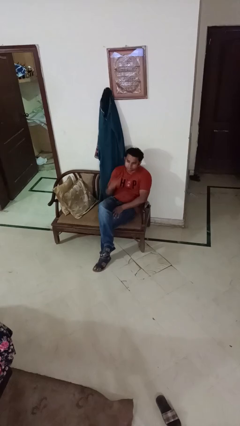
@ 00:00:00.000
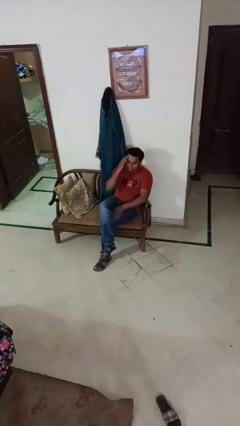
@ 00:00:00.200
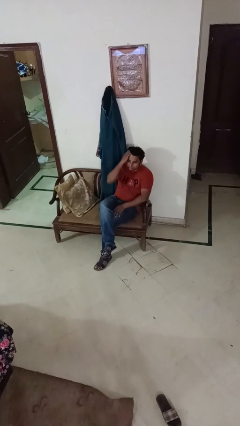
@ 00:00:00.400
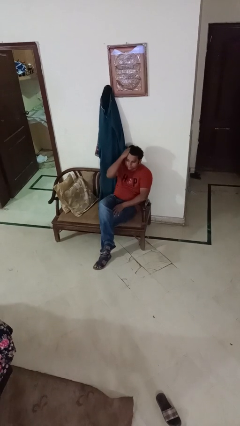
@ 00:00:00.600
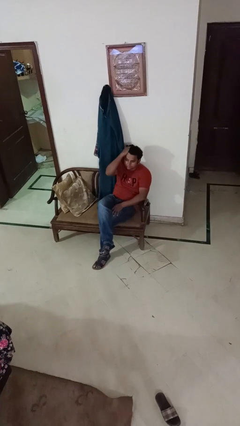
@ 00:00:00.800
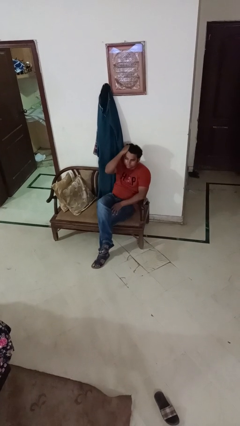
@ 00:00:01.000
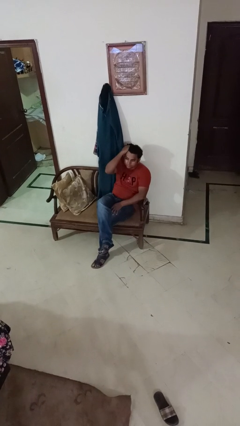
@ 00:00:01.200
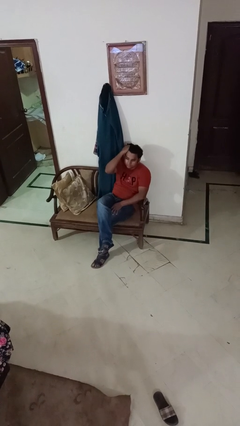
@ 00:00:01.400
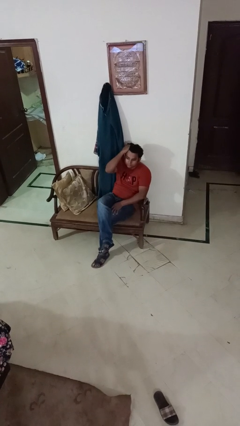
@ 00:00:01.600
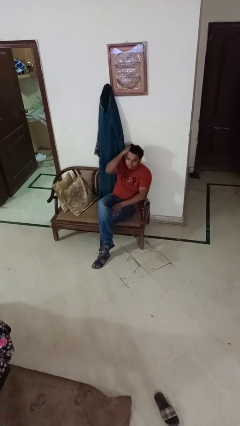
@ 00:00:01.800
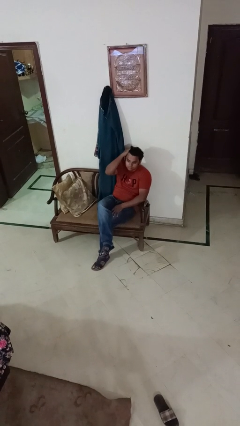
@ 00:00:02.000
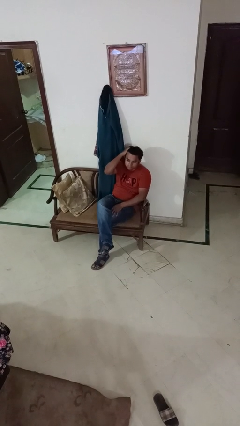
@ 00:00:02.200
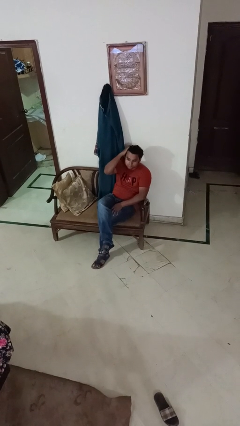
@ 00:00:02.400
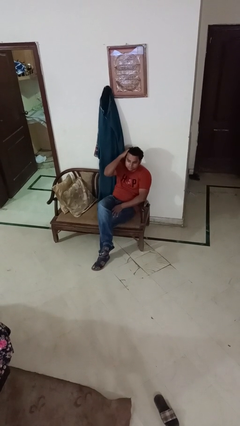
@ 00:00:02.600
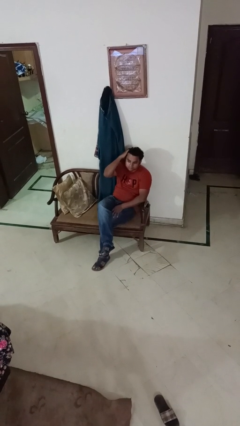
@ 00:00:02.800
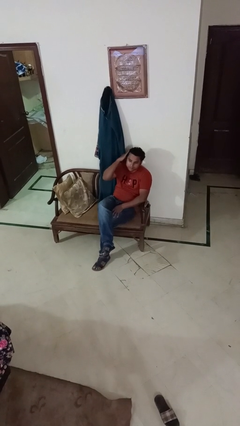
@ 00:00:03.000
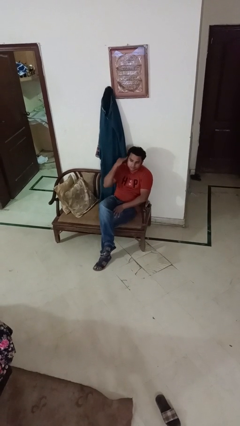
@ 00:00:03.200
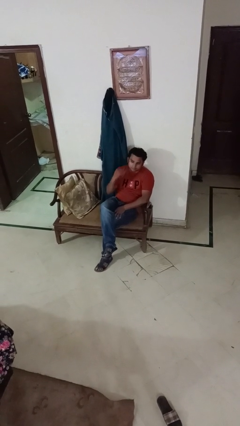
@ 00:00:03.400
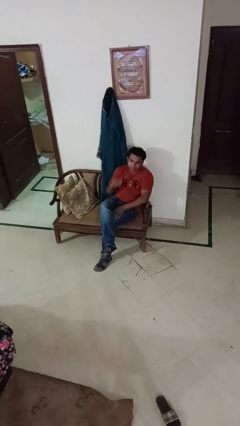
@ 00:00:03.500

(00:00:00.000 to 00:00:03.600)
person strokes hair

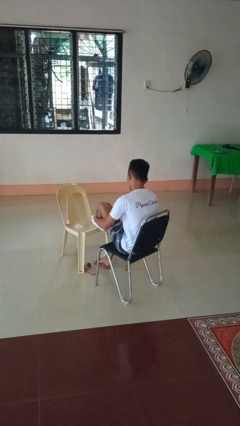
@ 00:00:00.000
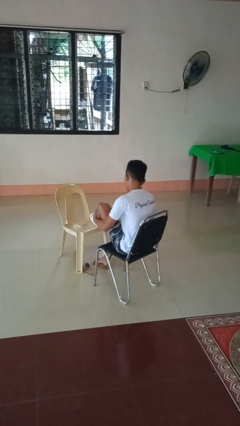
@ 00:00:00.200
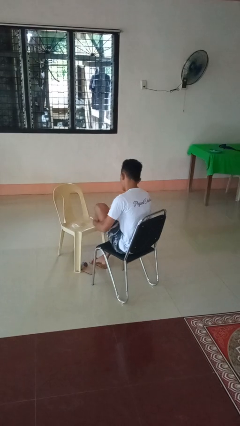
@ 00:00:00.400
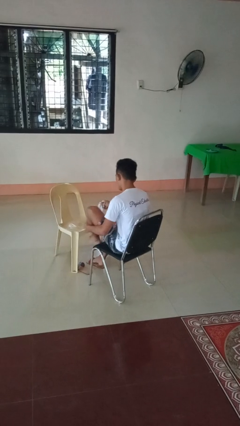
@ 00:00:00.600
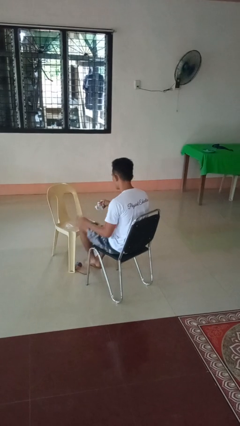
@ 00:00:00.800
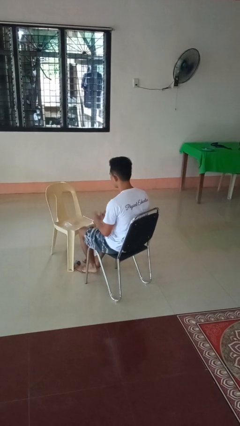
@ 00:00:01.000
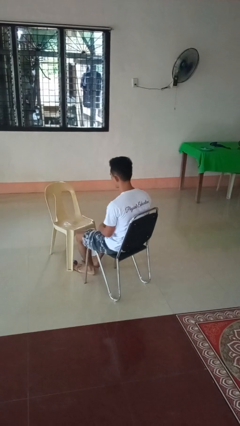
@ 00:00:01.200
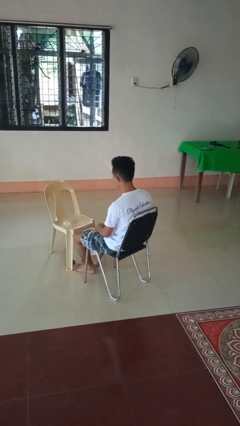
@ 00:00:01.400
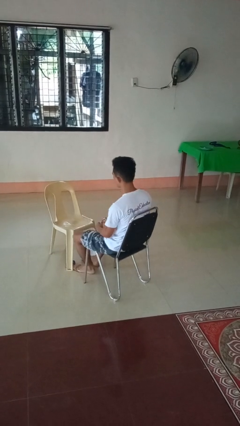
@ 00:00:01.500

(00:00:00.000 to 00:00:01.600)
person takes off socks

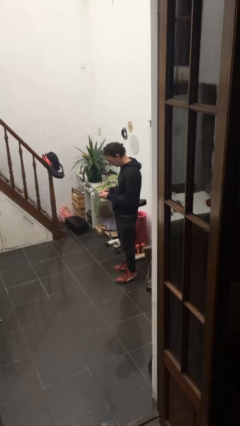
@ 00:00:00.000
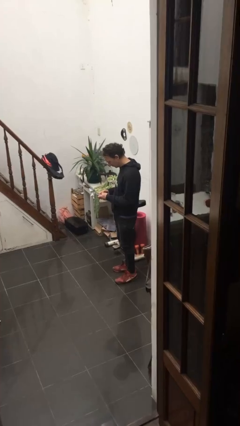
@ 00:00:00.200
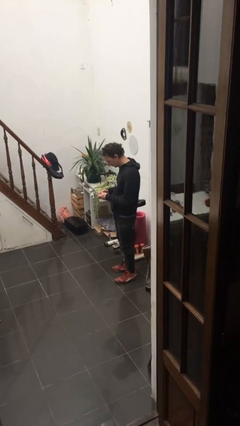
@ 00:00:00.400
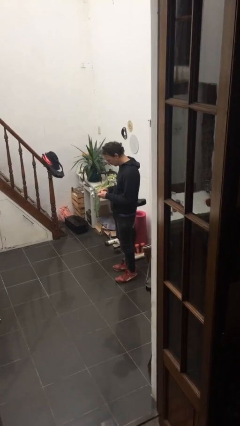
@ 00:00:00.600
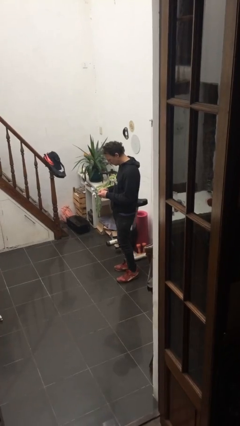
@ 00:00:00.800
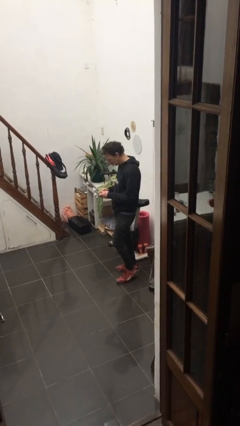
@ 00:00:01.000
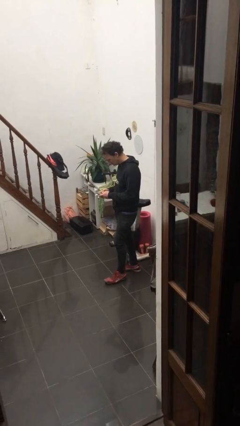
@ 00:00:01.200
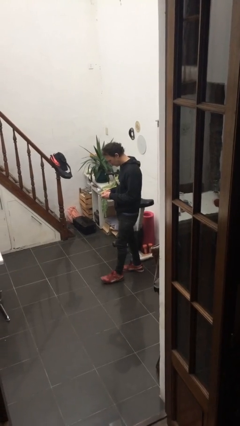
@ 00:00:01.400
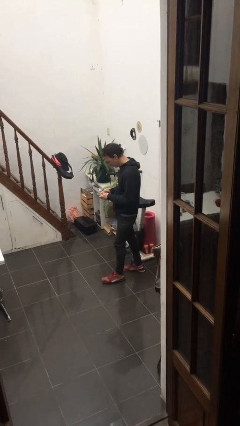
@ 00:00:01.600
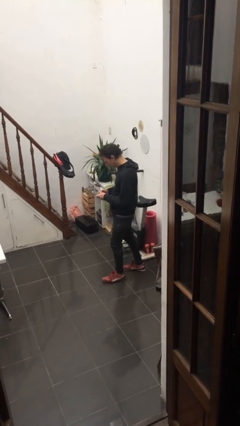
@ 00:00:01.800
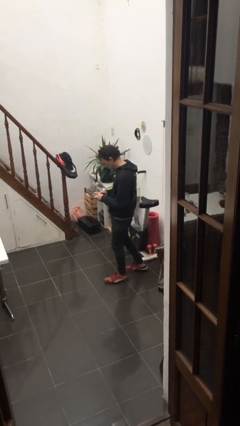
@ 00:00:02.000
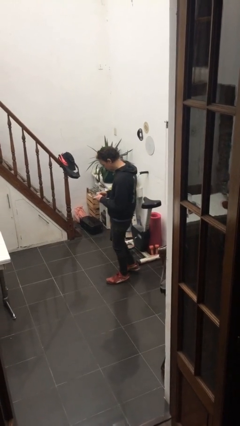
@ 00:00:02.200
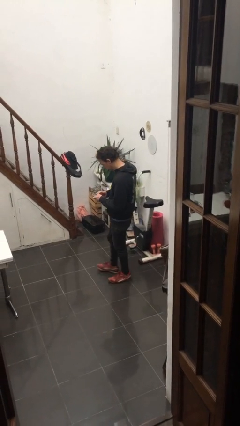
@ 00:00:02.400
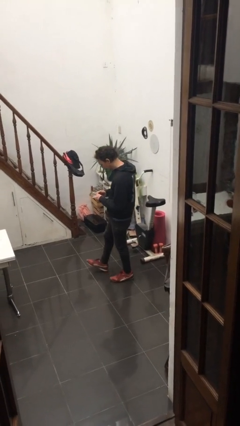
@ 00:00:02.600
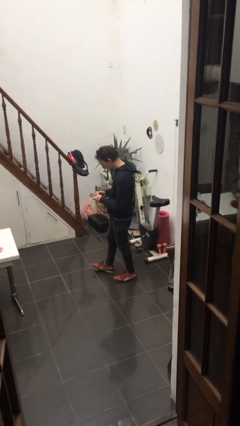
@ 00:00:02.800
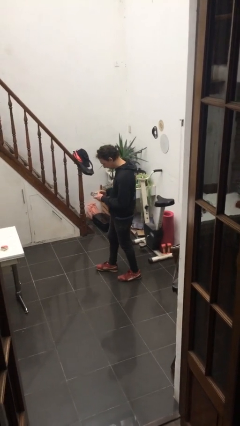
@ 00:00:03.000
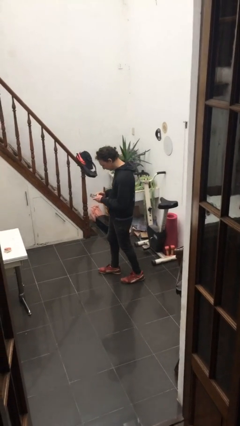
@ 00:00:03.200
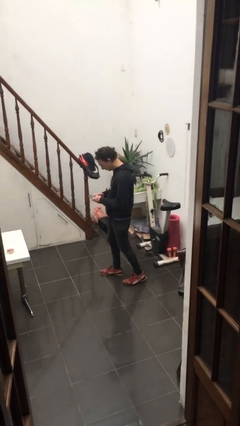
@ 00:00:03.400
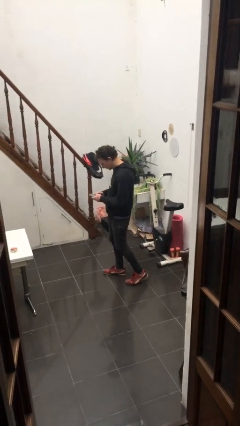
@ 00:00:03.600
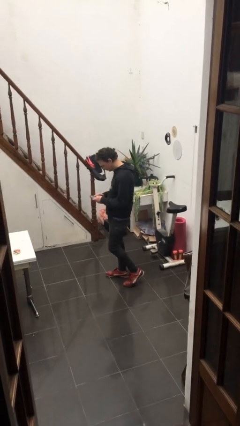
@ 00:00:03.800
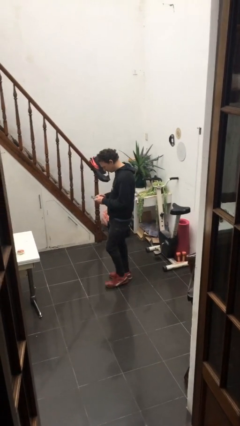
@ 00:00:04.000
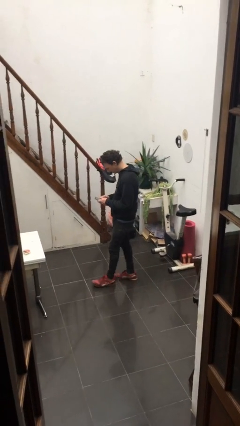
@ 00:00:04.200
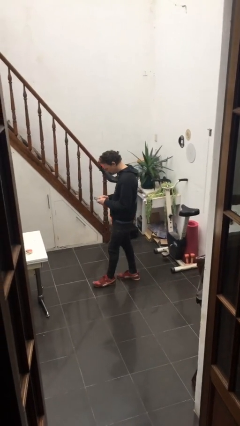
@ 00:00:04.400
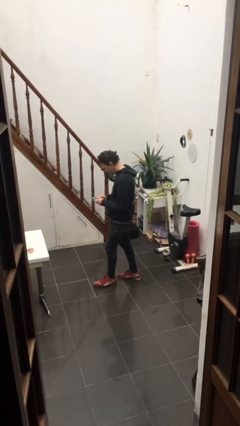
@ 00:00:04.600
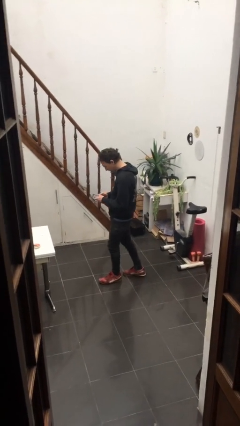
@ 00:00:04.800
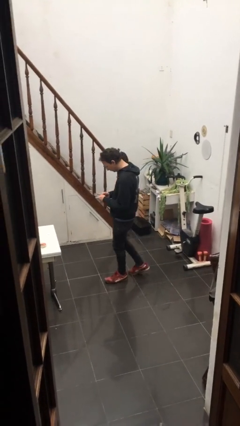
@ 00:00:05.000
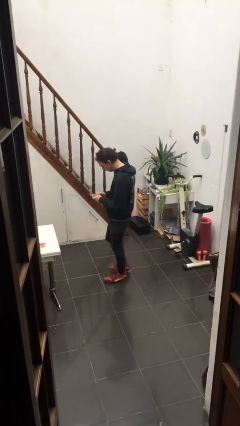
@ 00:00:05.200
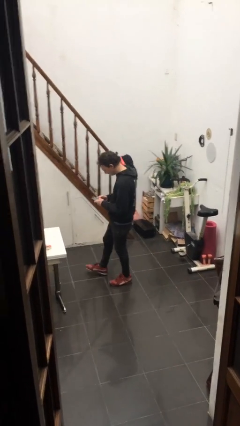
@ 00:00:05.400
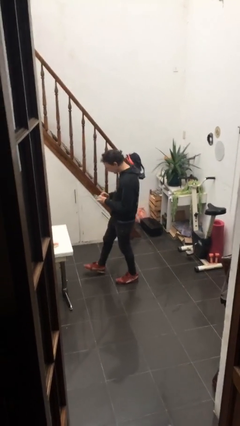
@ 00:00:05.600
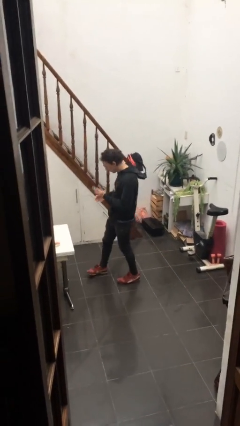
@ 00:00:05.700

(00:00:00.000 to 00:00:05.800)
person texts on phone

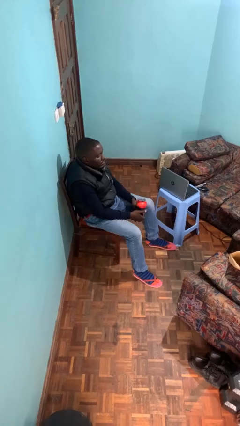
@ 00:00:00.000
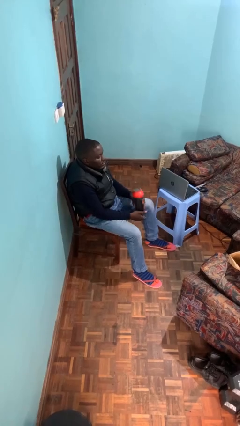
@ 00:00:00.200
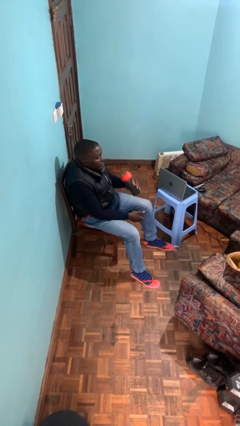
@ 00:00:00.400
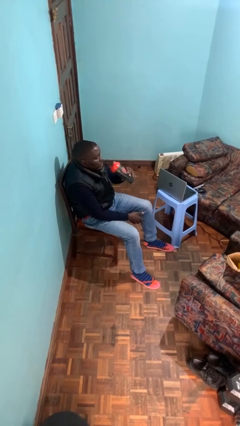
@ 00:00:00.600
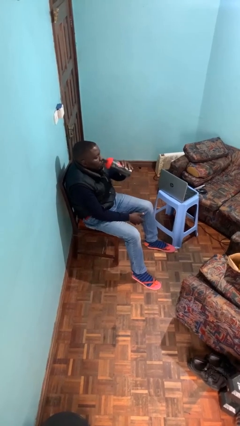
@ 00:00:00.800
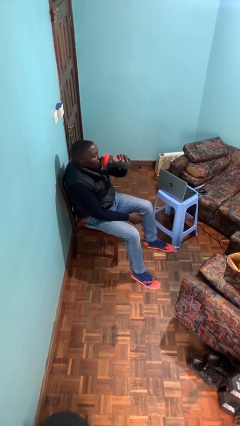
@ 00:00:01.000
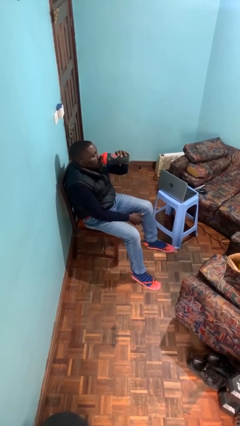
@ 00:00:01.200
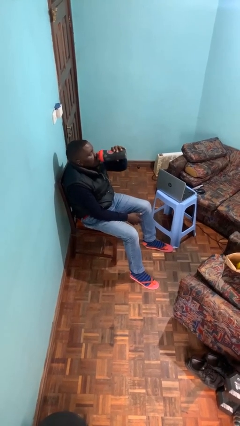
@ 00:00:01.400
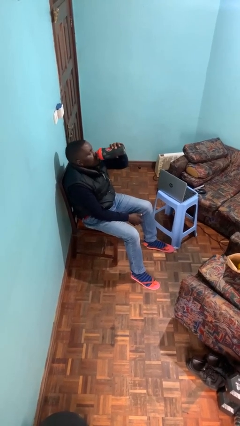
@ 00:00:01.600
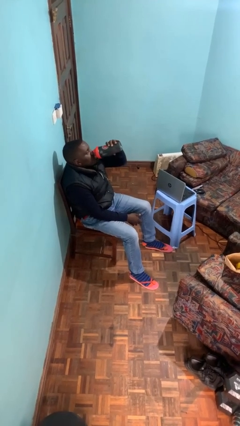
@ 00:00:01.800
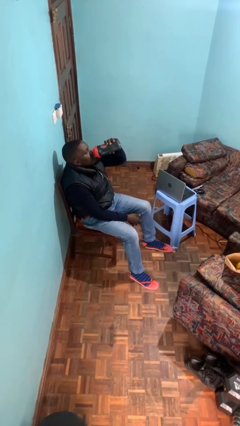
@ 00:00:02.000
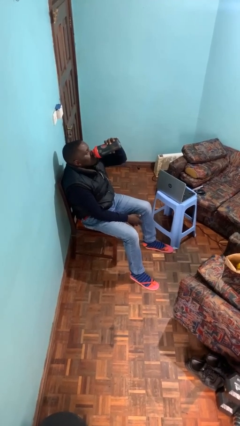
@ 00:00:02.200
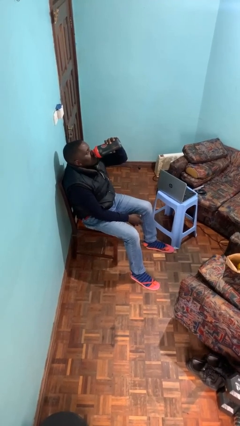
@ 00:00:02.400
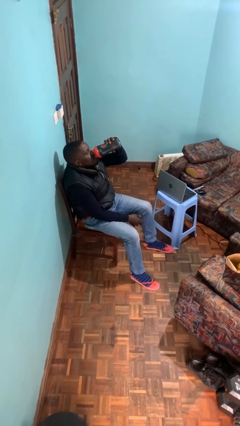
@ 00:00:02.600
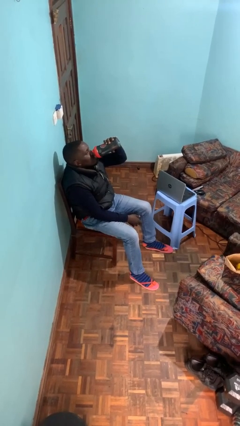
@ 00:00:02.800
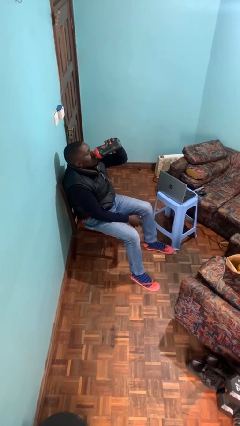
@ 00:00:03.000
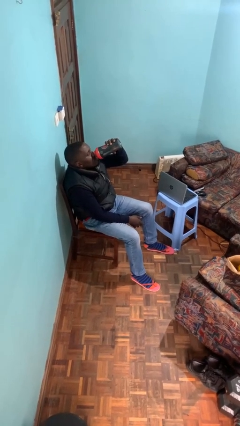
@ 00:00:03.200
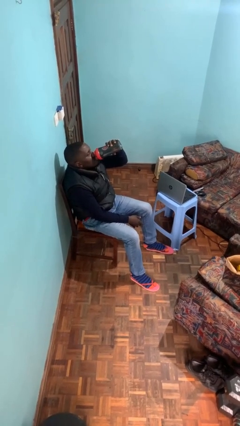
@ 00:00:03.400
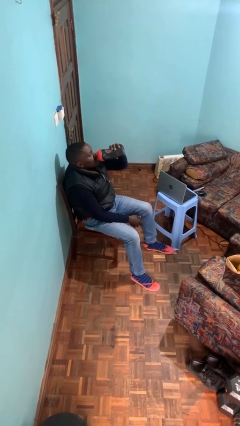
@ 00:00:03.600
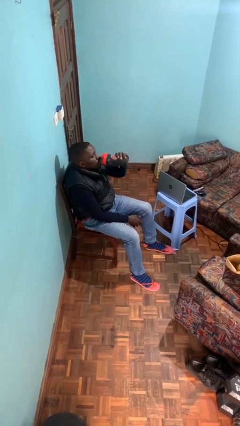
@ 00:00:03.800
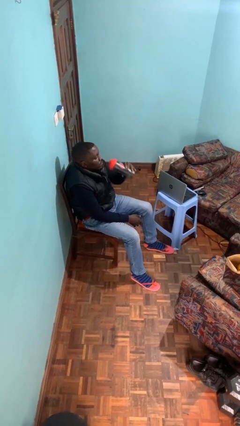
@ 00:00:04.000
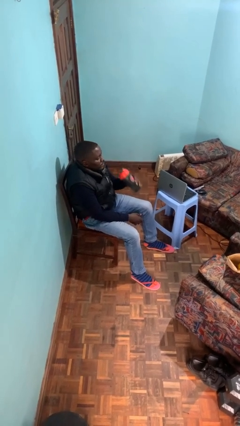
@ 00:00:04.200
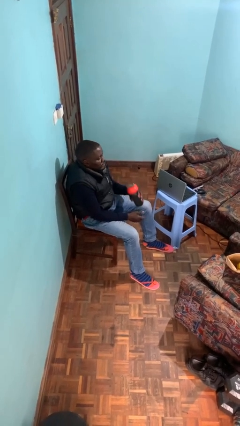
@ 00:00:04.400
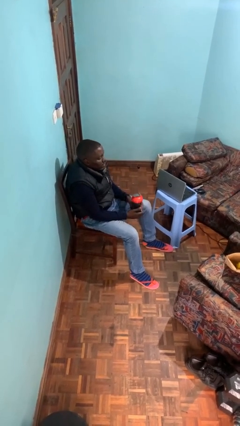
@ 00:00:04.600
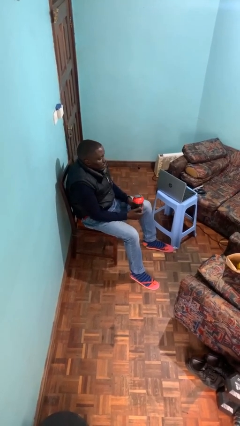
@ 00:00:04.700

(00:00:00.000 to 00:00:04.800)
person drinks from bottle

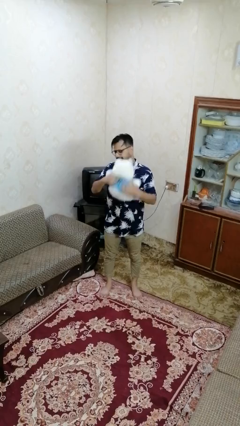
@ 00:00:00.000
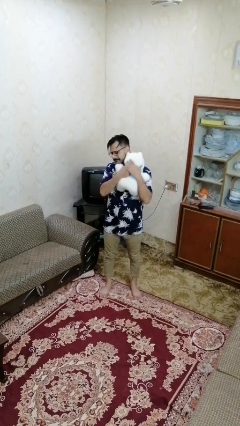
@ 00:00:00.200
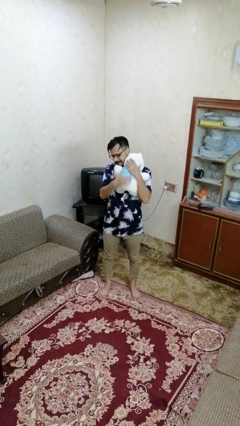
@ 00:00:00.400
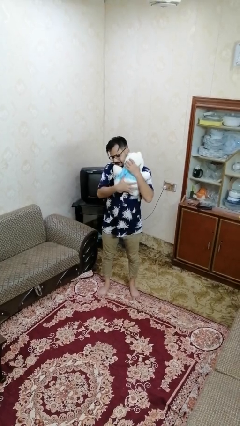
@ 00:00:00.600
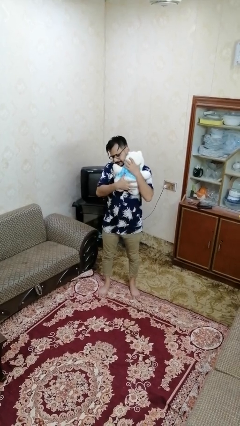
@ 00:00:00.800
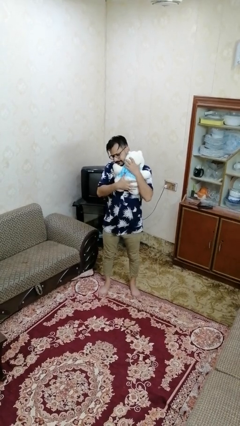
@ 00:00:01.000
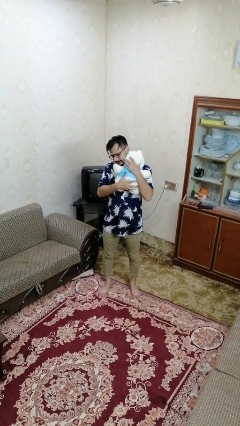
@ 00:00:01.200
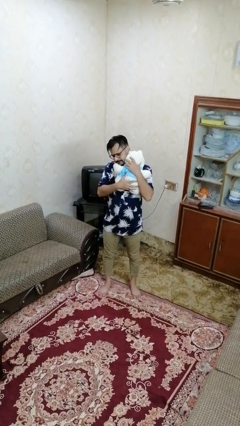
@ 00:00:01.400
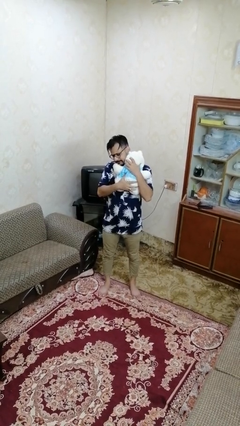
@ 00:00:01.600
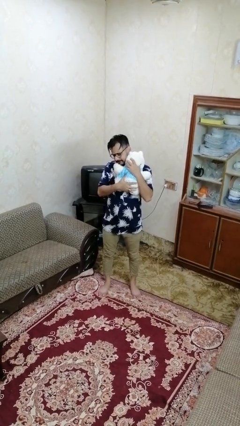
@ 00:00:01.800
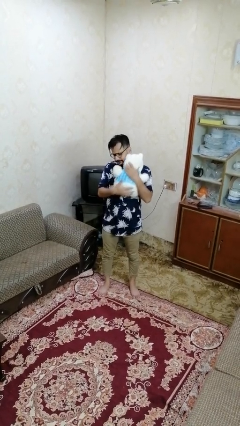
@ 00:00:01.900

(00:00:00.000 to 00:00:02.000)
person hugs stuffed animal
